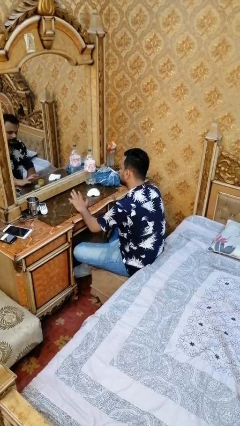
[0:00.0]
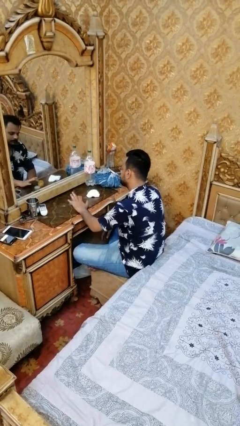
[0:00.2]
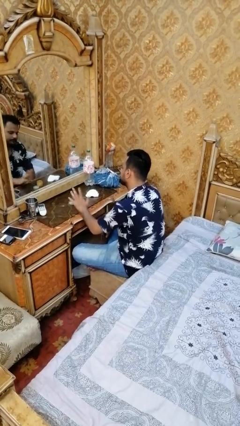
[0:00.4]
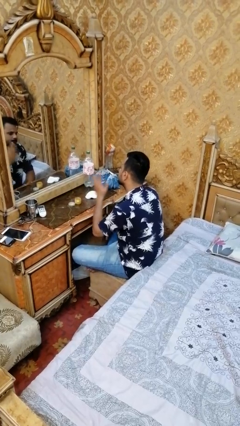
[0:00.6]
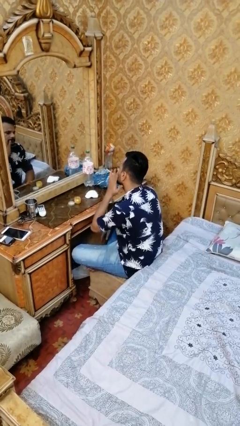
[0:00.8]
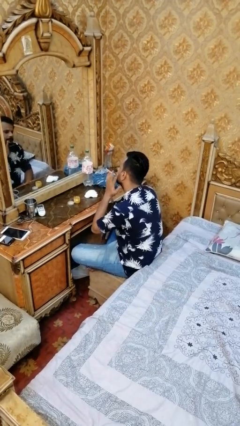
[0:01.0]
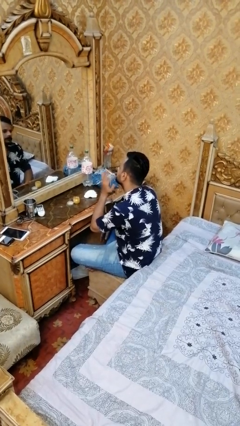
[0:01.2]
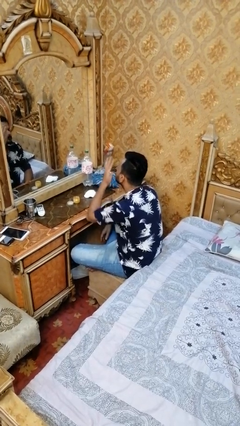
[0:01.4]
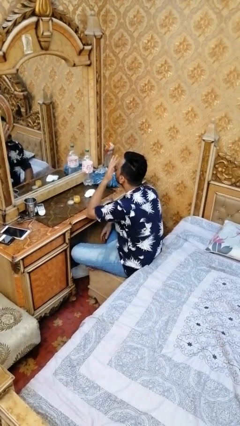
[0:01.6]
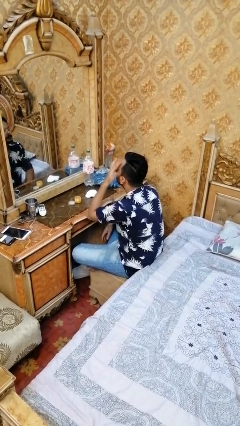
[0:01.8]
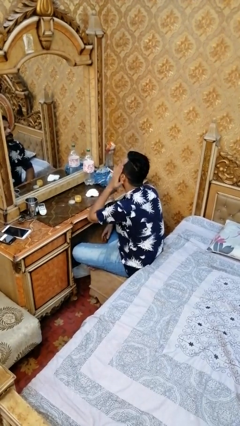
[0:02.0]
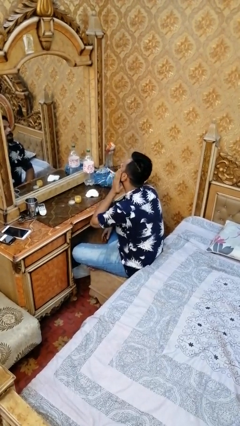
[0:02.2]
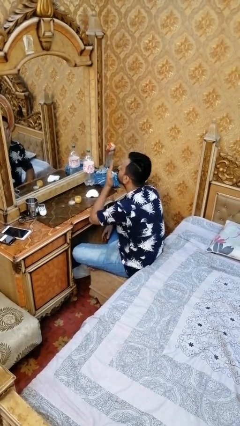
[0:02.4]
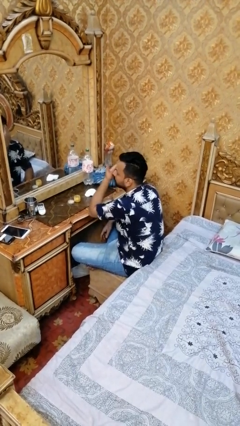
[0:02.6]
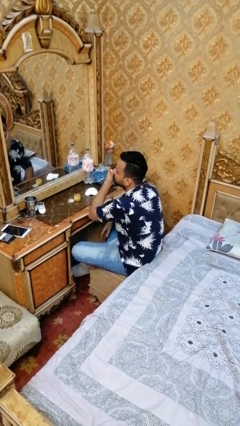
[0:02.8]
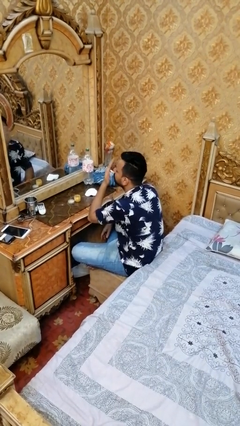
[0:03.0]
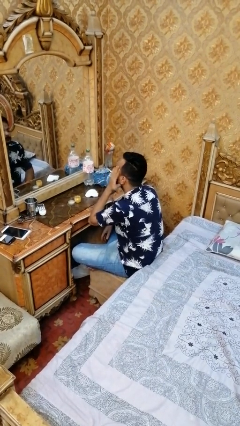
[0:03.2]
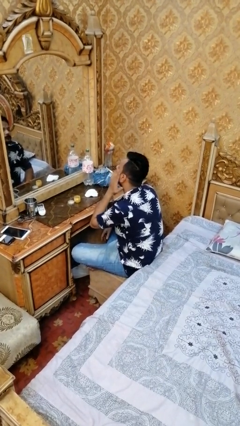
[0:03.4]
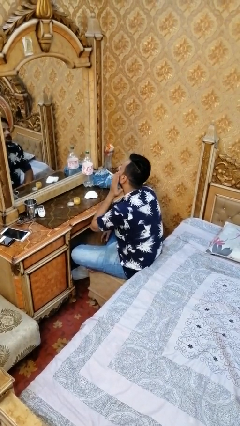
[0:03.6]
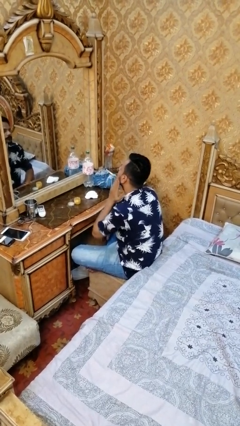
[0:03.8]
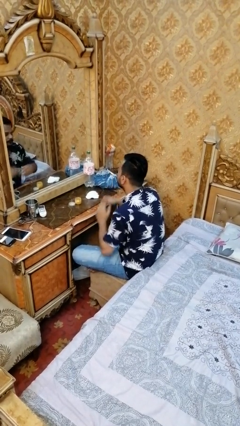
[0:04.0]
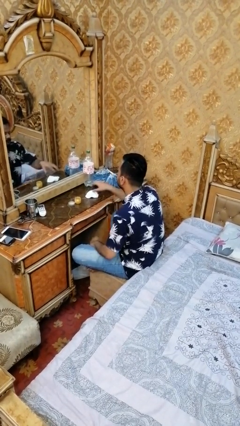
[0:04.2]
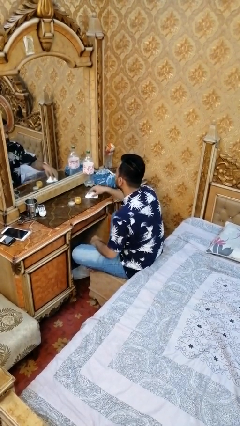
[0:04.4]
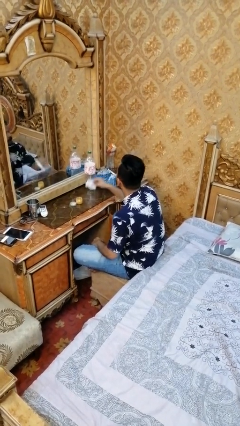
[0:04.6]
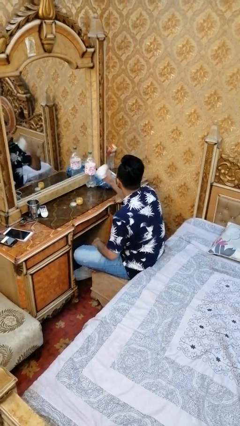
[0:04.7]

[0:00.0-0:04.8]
person puts on facemask

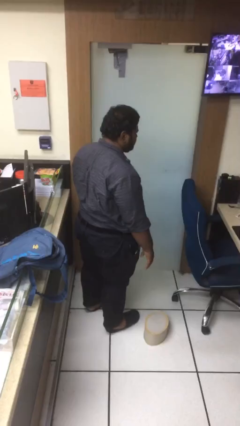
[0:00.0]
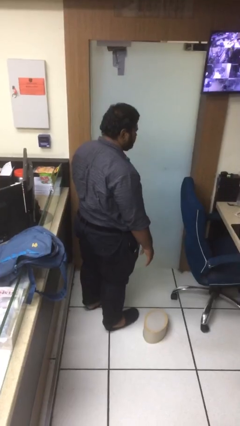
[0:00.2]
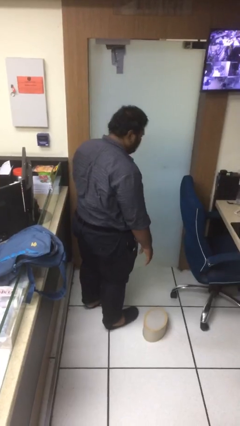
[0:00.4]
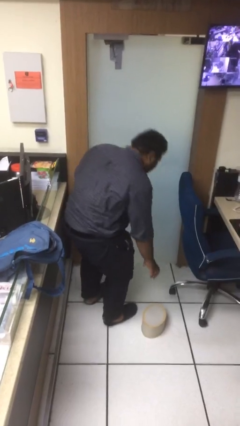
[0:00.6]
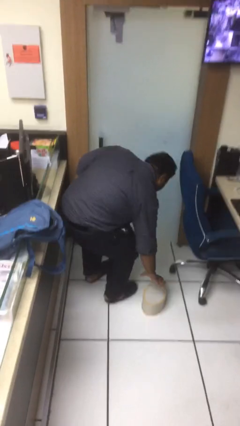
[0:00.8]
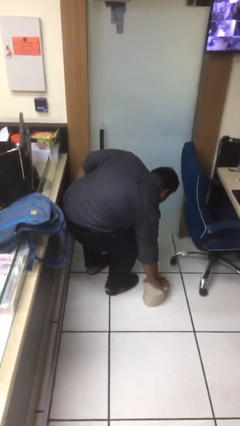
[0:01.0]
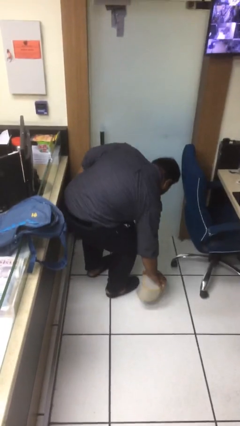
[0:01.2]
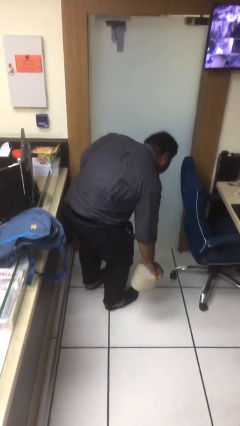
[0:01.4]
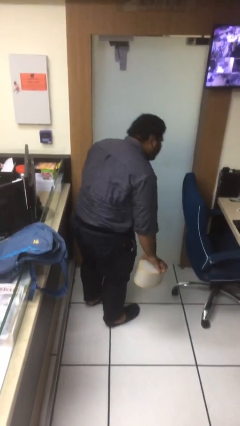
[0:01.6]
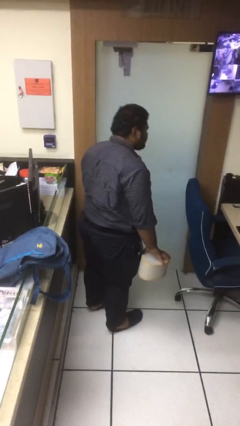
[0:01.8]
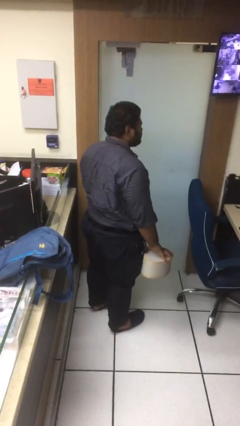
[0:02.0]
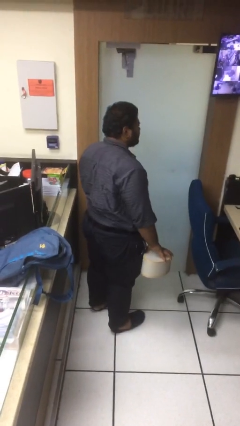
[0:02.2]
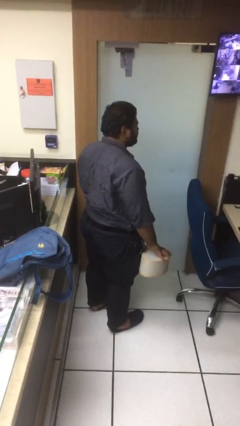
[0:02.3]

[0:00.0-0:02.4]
person picks up object from floor

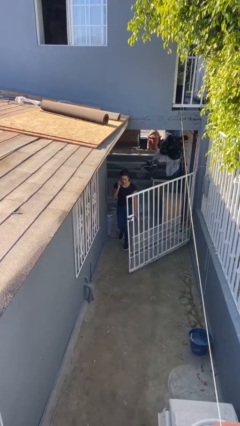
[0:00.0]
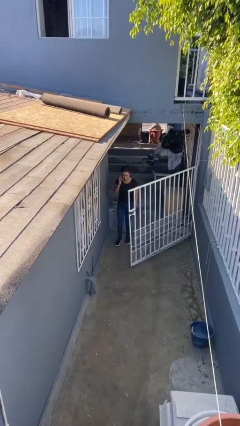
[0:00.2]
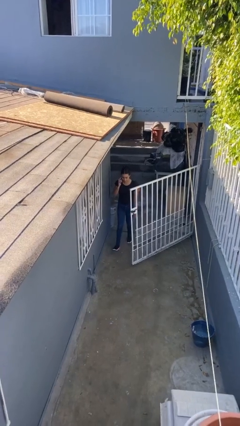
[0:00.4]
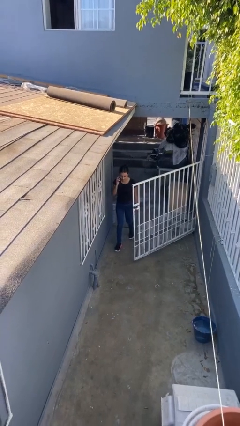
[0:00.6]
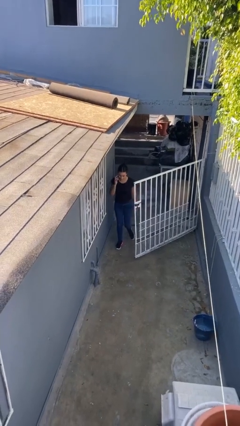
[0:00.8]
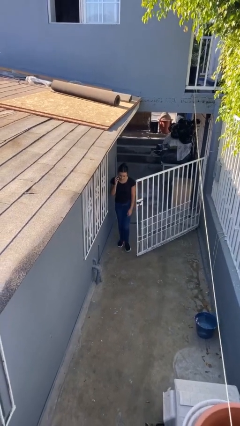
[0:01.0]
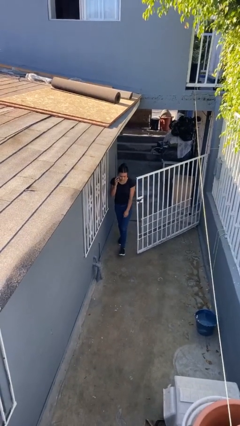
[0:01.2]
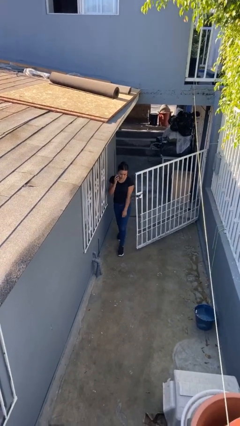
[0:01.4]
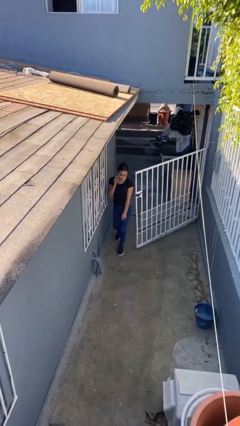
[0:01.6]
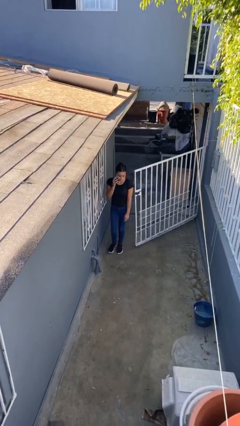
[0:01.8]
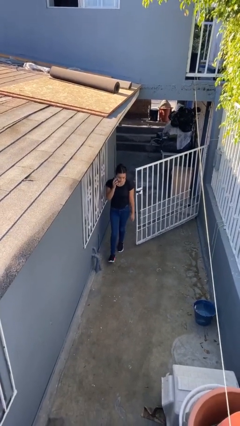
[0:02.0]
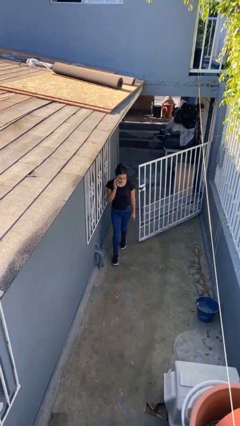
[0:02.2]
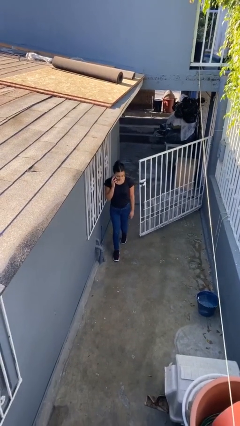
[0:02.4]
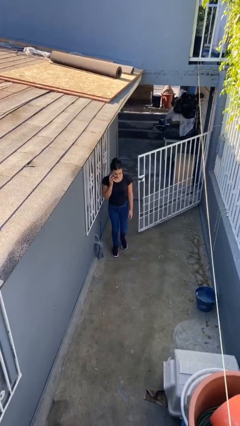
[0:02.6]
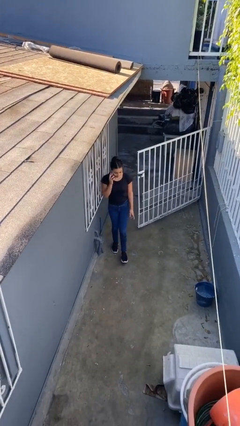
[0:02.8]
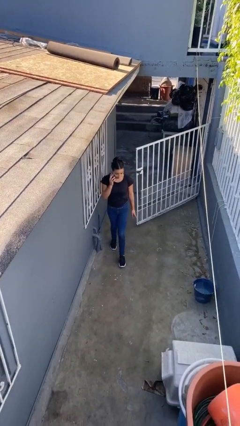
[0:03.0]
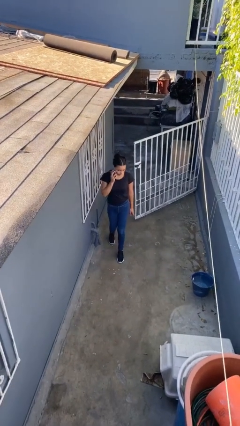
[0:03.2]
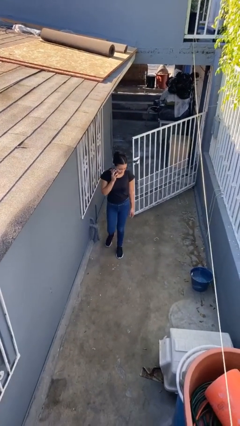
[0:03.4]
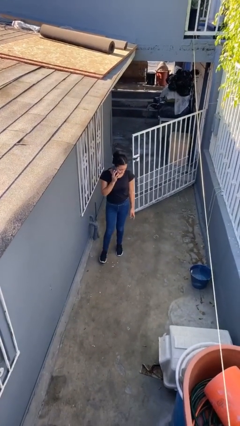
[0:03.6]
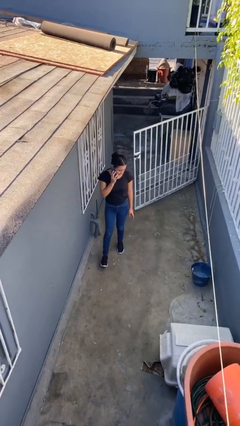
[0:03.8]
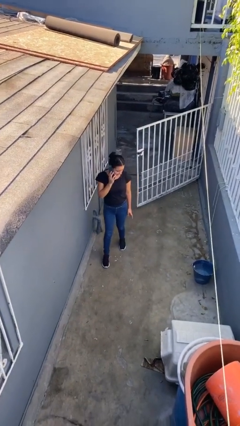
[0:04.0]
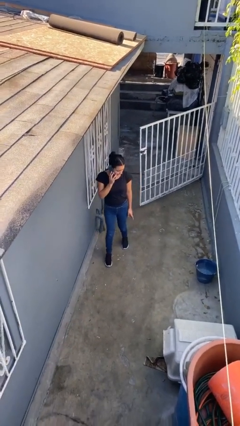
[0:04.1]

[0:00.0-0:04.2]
person enters scene through structure

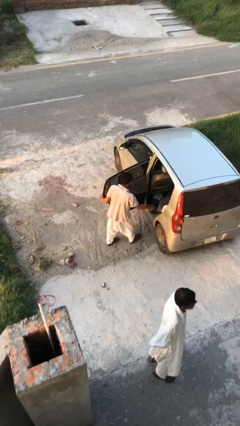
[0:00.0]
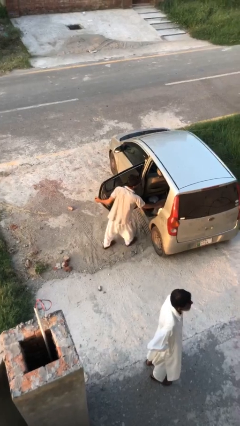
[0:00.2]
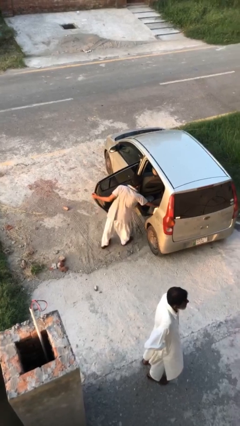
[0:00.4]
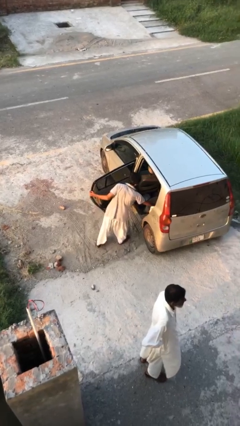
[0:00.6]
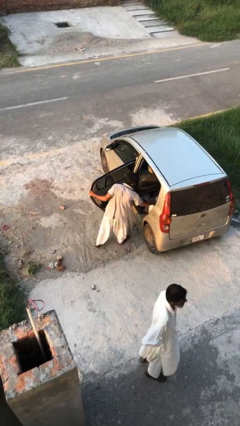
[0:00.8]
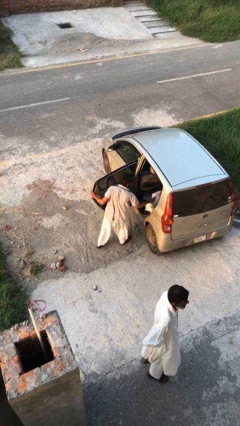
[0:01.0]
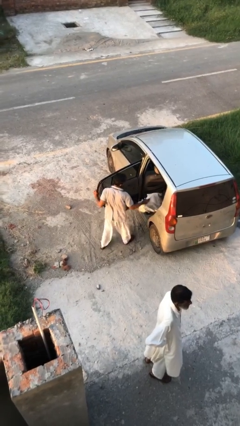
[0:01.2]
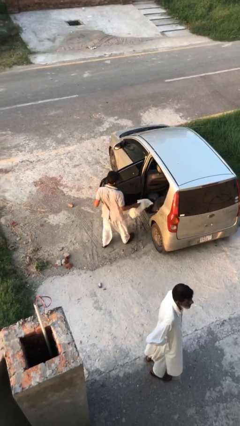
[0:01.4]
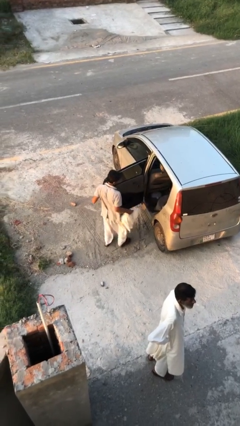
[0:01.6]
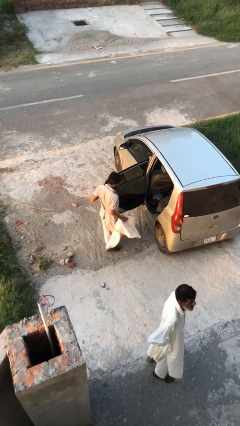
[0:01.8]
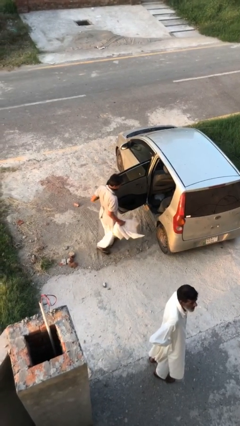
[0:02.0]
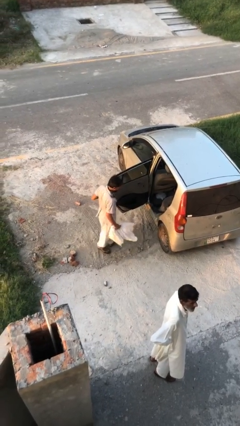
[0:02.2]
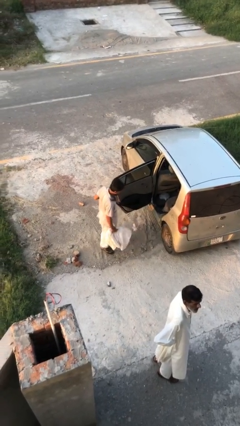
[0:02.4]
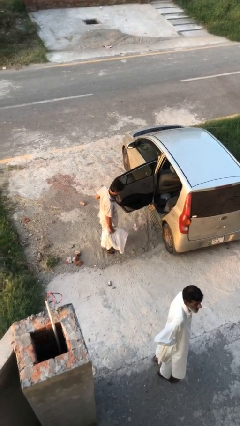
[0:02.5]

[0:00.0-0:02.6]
person unloads car

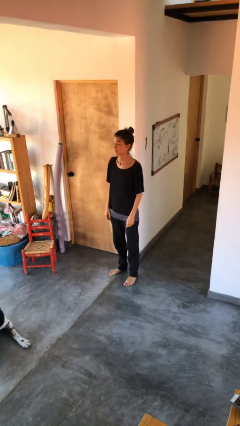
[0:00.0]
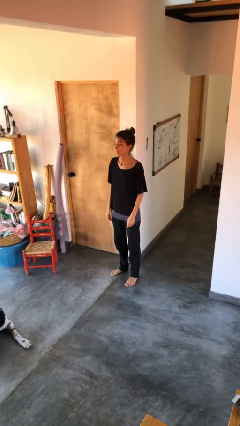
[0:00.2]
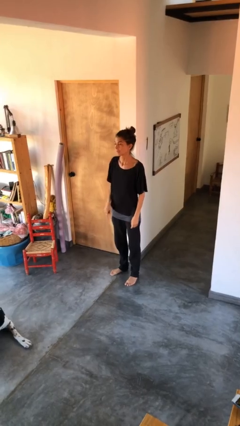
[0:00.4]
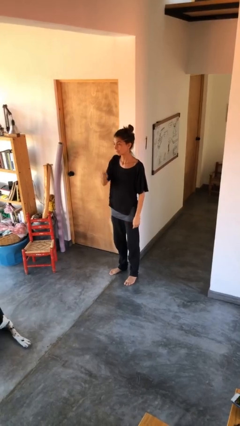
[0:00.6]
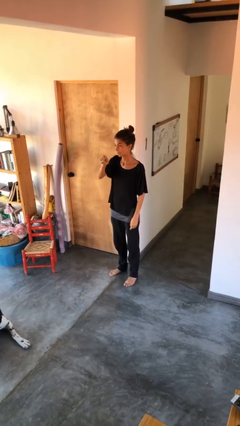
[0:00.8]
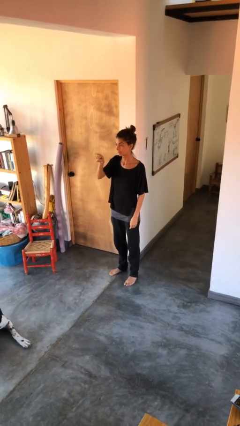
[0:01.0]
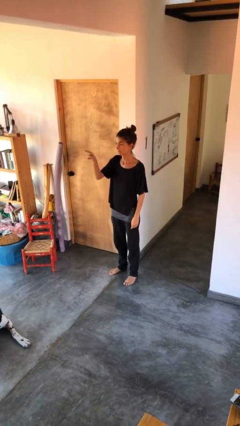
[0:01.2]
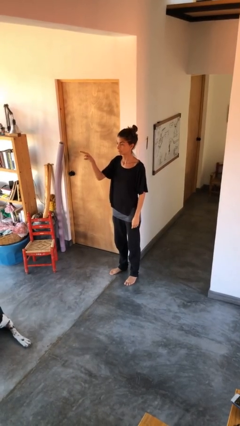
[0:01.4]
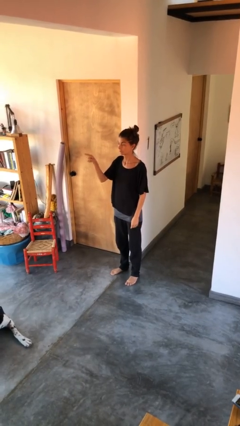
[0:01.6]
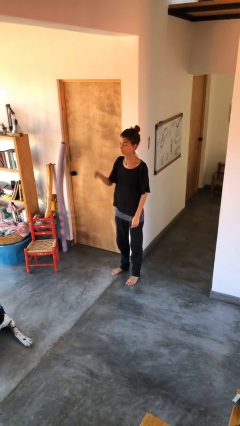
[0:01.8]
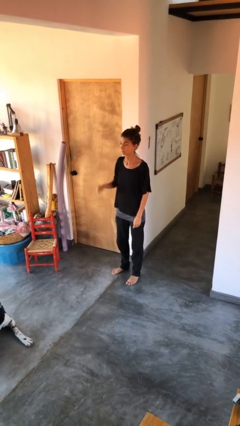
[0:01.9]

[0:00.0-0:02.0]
person gestures swipe right

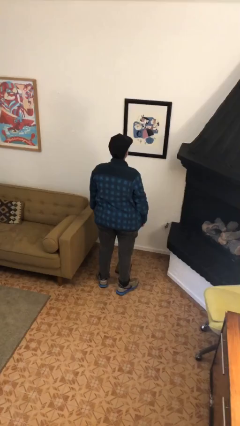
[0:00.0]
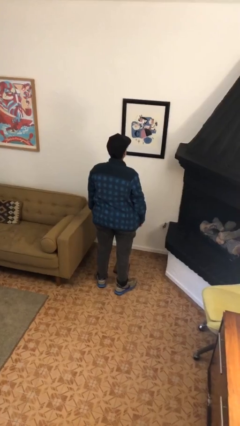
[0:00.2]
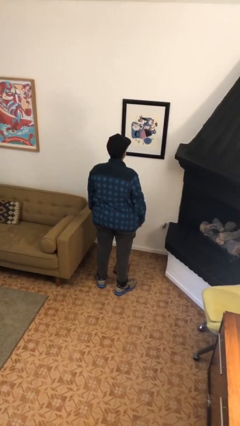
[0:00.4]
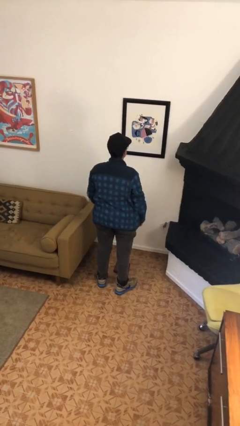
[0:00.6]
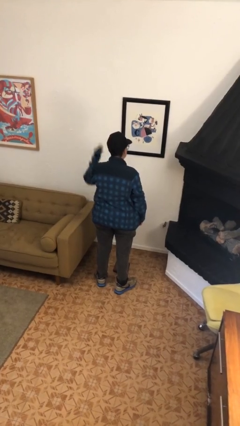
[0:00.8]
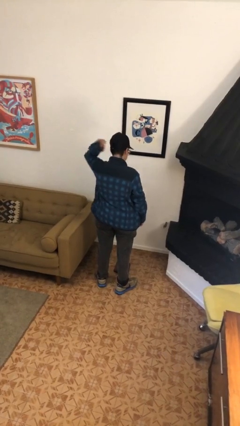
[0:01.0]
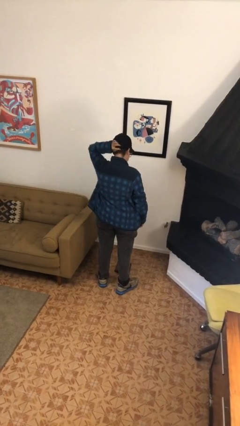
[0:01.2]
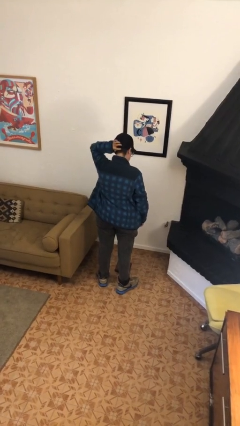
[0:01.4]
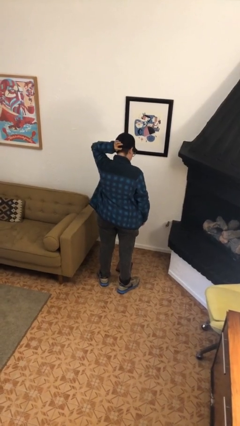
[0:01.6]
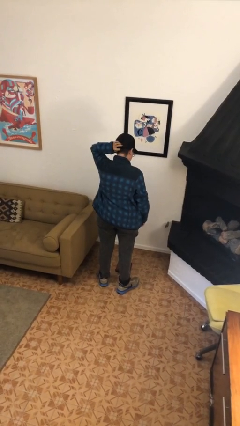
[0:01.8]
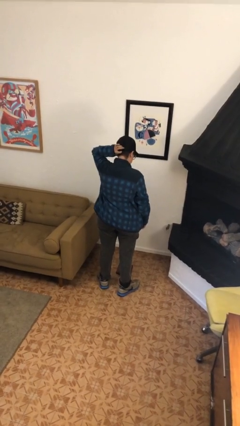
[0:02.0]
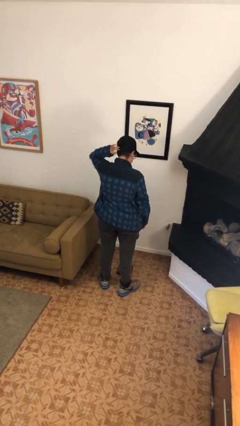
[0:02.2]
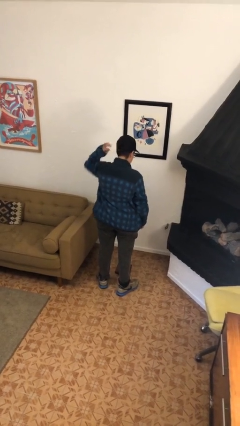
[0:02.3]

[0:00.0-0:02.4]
person scratches face
